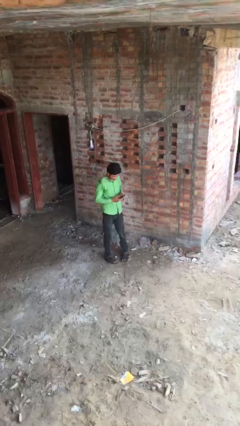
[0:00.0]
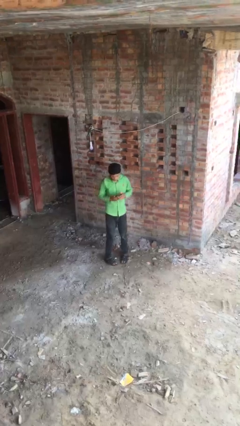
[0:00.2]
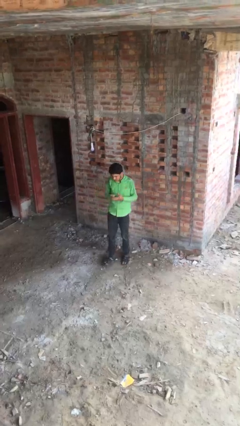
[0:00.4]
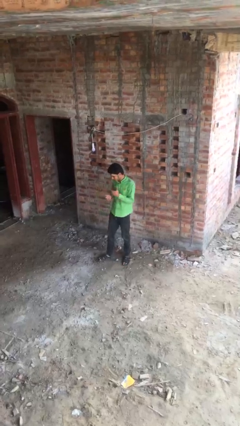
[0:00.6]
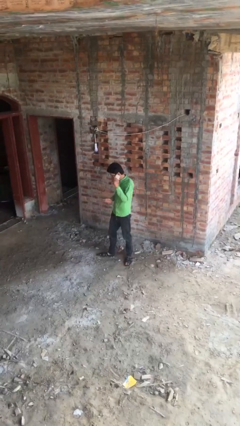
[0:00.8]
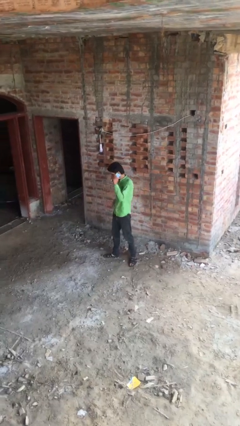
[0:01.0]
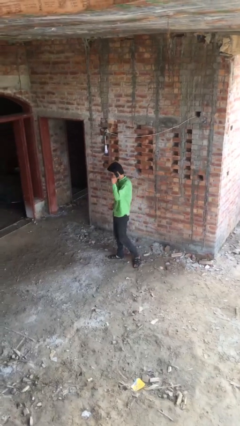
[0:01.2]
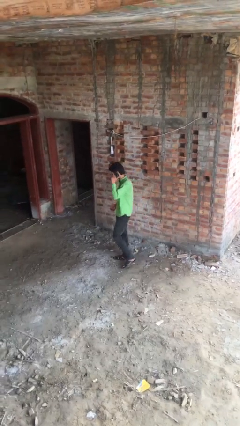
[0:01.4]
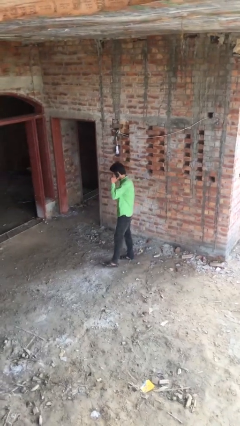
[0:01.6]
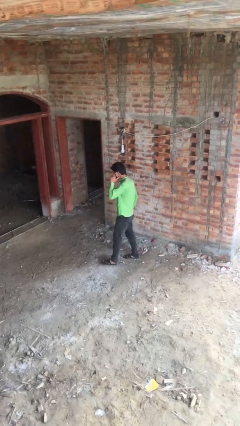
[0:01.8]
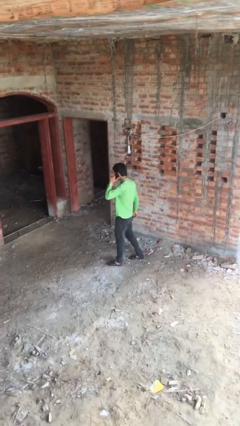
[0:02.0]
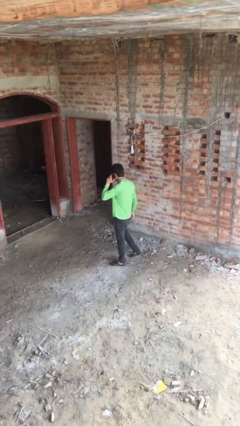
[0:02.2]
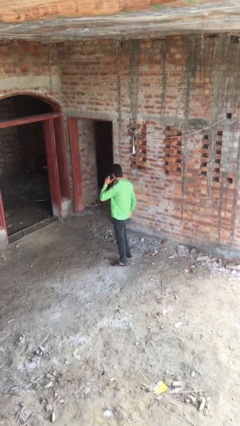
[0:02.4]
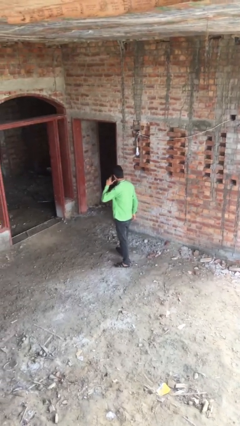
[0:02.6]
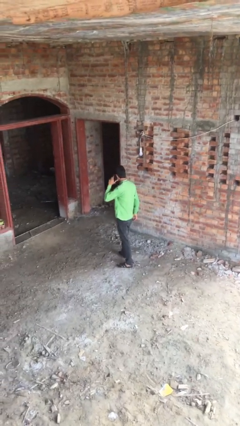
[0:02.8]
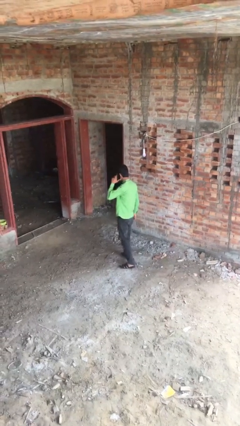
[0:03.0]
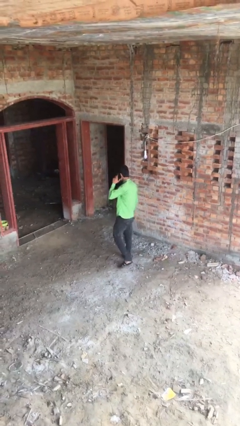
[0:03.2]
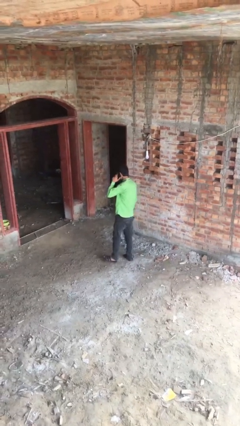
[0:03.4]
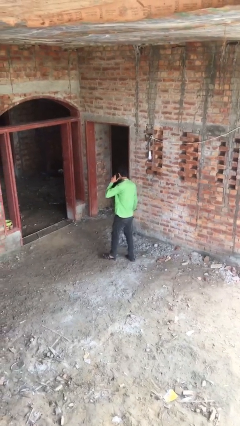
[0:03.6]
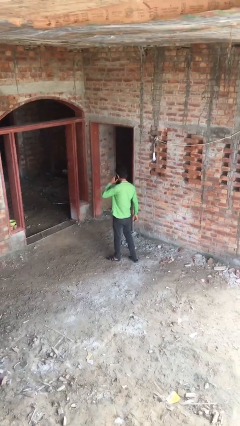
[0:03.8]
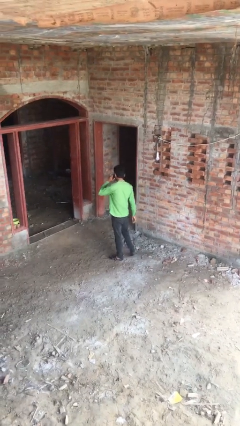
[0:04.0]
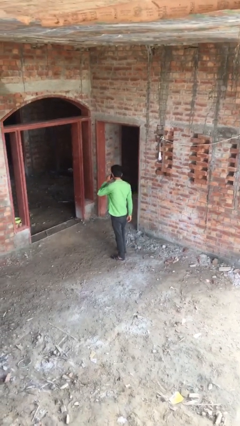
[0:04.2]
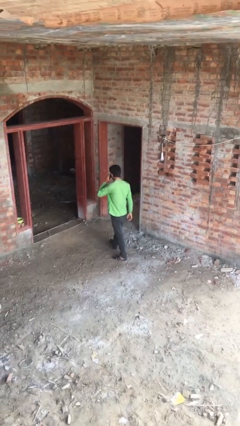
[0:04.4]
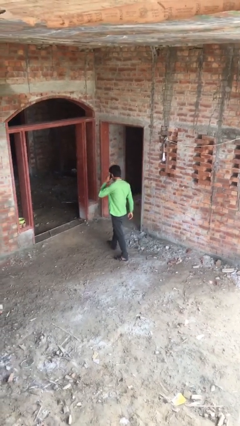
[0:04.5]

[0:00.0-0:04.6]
person talks on phone

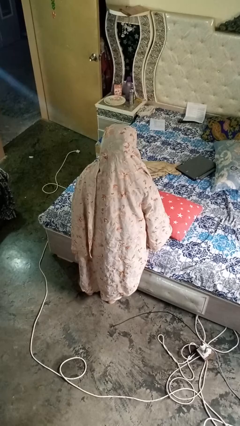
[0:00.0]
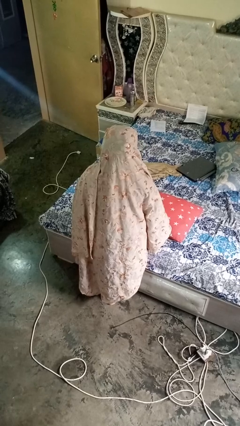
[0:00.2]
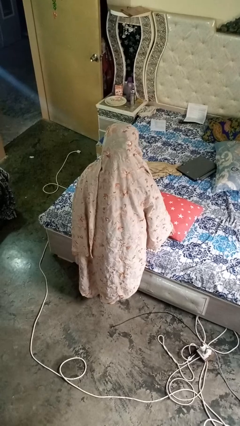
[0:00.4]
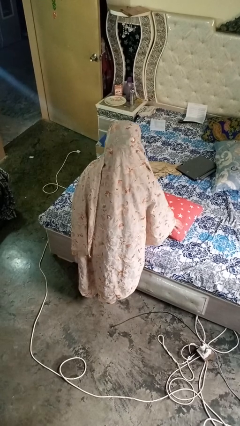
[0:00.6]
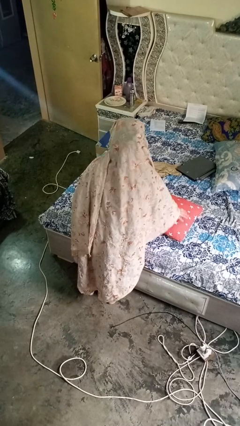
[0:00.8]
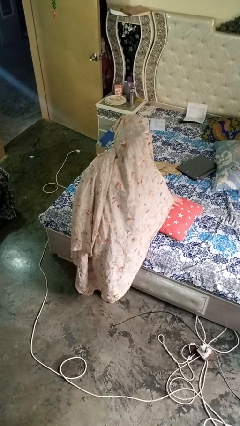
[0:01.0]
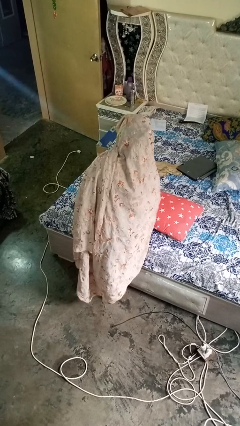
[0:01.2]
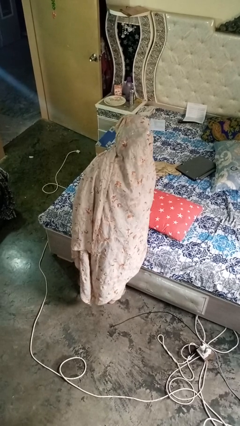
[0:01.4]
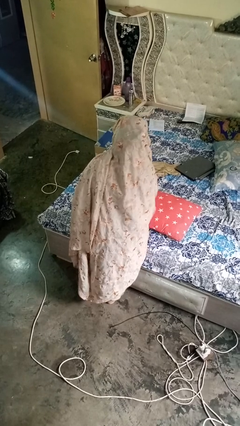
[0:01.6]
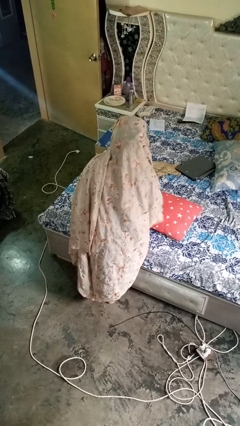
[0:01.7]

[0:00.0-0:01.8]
person waves hand over object

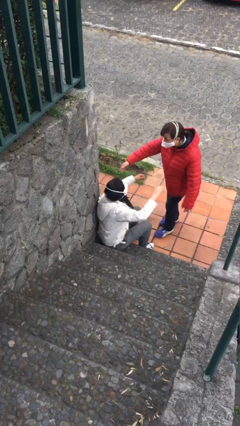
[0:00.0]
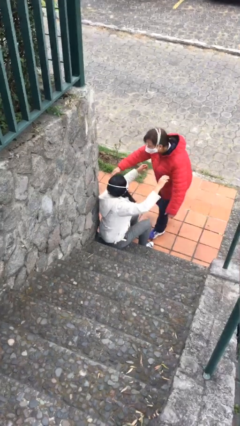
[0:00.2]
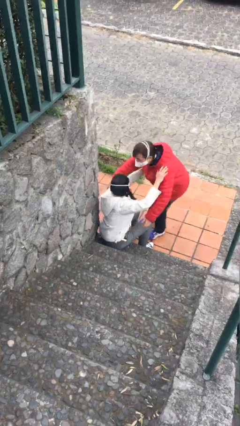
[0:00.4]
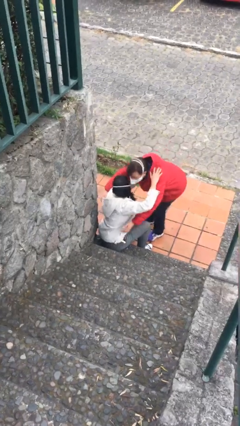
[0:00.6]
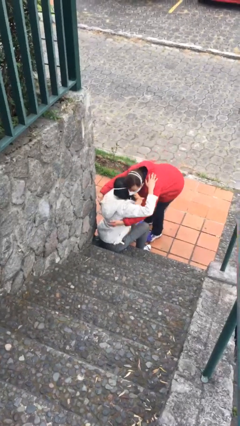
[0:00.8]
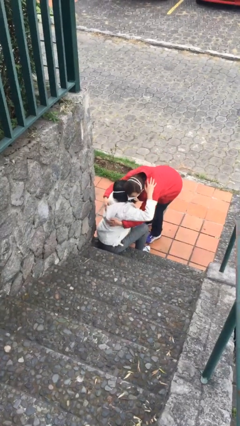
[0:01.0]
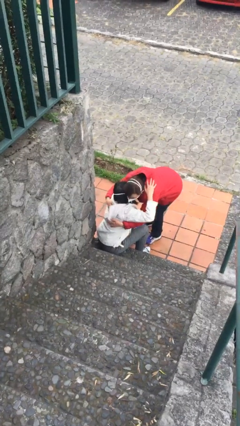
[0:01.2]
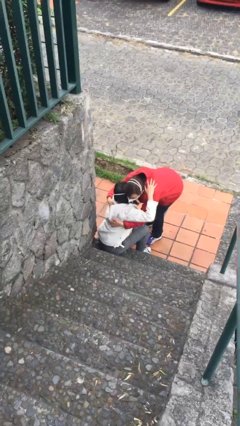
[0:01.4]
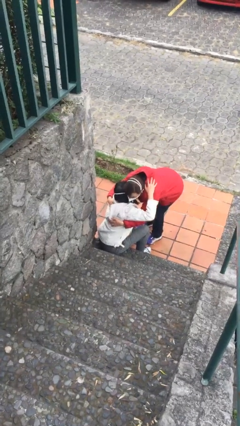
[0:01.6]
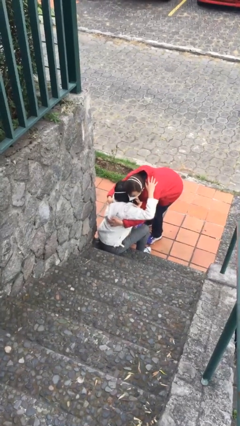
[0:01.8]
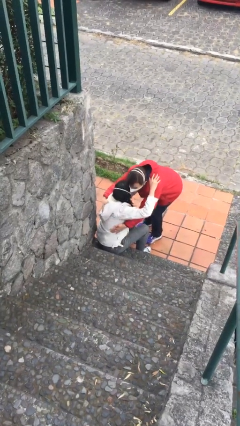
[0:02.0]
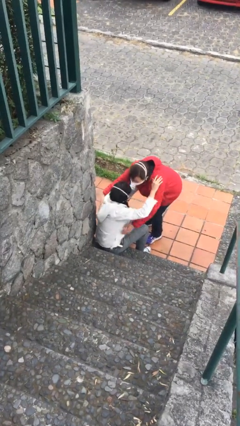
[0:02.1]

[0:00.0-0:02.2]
person embraces person

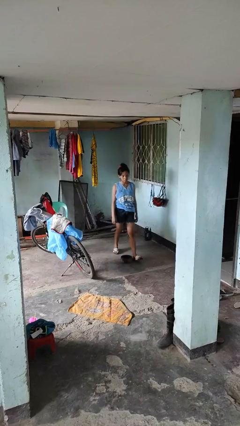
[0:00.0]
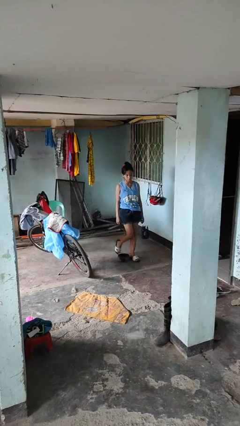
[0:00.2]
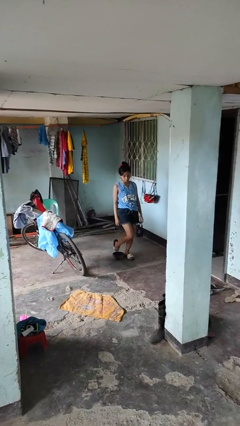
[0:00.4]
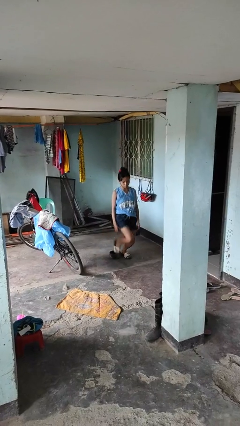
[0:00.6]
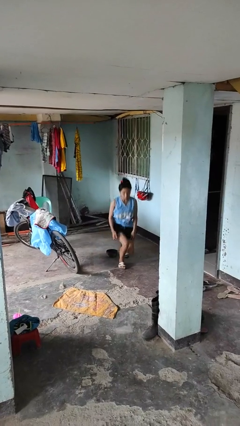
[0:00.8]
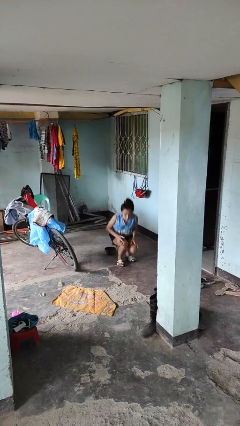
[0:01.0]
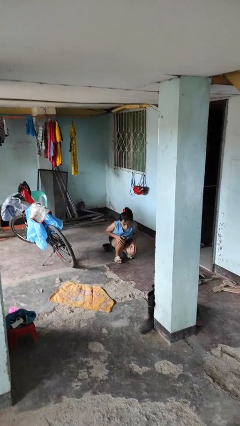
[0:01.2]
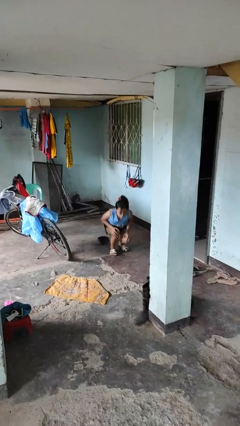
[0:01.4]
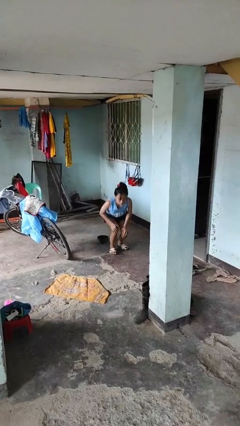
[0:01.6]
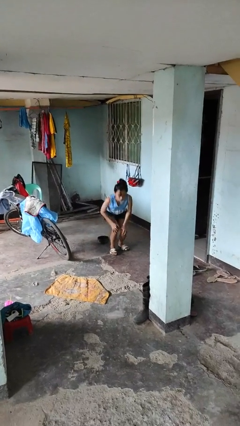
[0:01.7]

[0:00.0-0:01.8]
person trips on object on floor

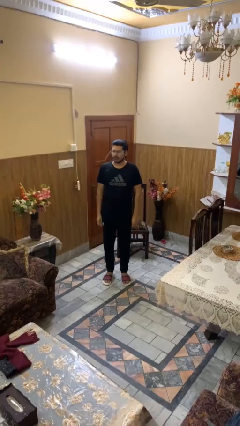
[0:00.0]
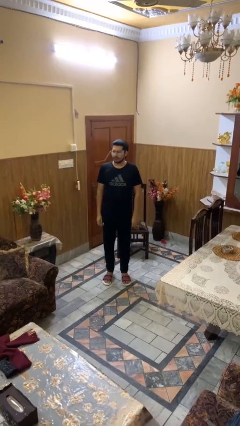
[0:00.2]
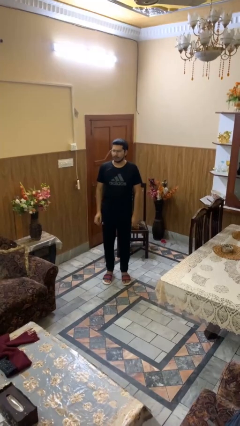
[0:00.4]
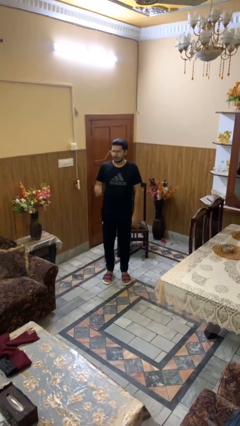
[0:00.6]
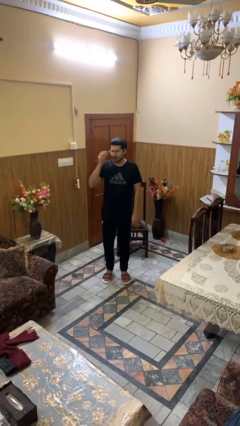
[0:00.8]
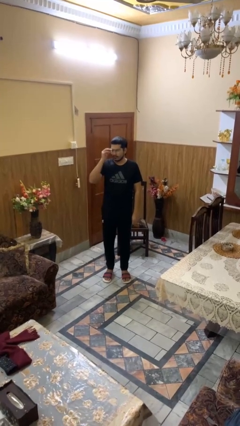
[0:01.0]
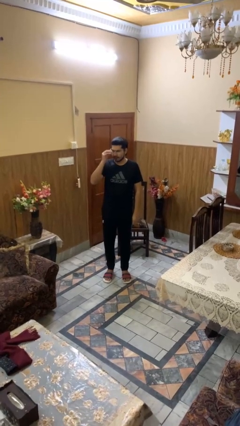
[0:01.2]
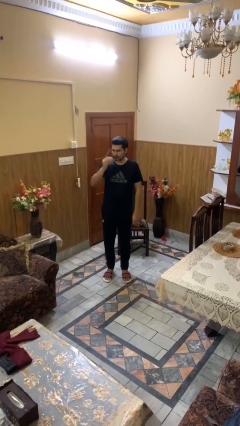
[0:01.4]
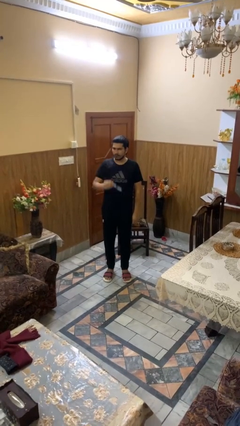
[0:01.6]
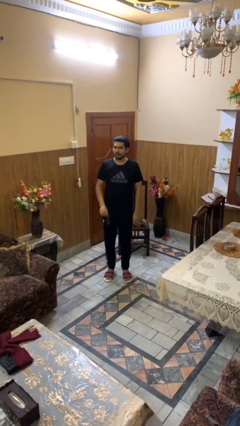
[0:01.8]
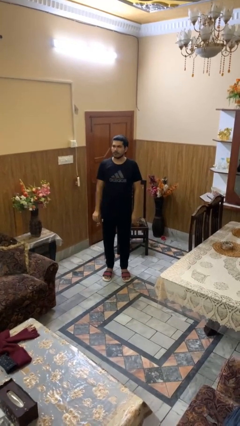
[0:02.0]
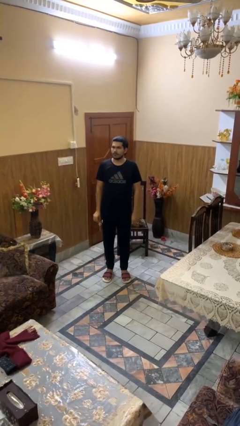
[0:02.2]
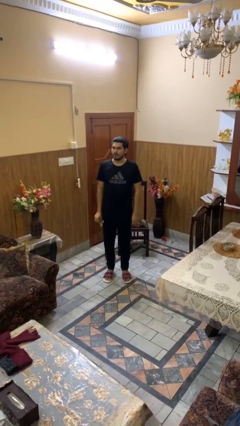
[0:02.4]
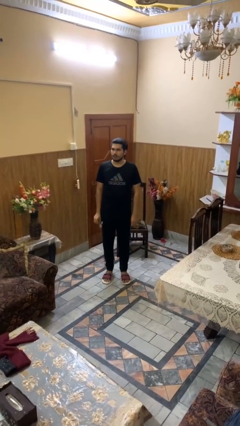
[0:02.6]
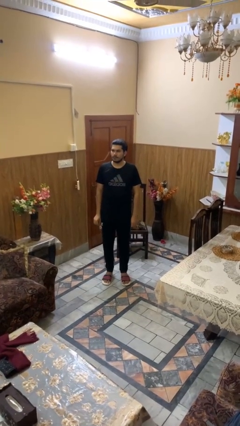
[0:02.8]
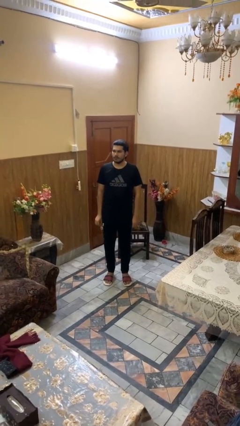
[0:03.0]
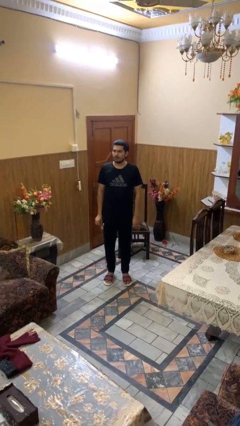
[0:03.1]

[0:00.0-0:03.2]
person takes off glasses

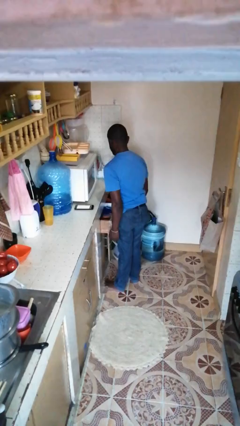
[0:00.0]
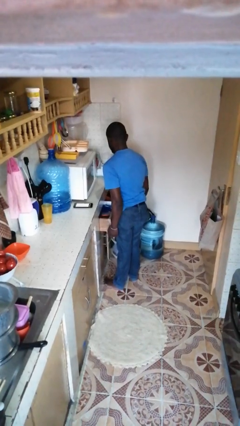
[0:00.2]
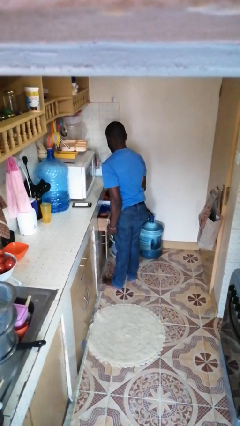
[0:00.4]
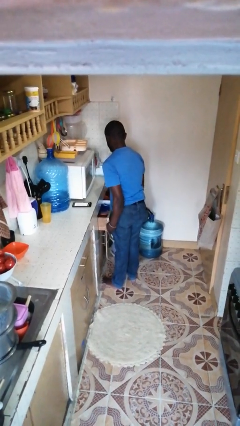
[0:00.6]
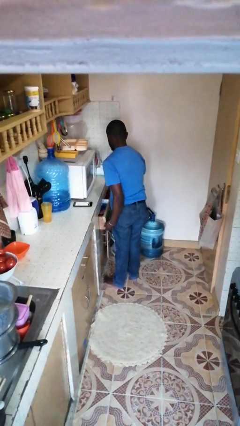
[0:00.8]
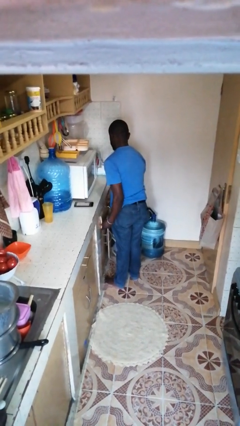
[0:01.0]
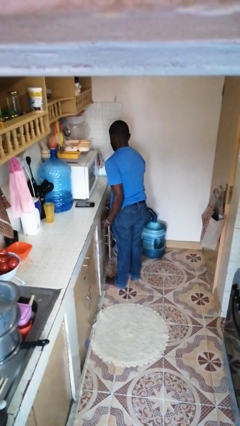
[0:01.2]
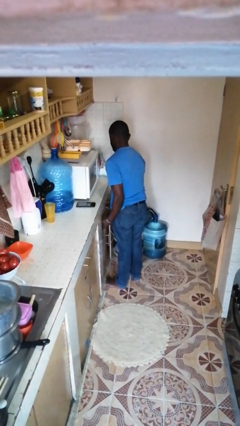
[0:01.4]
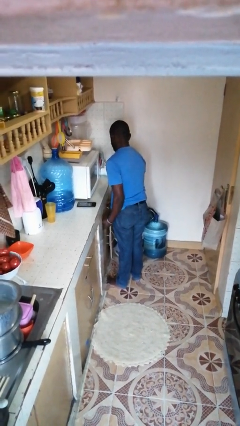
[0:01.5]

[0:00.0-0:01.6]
person closes kitchen drawer

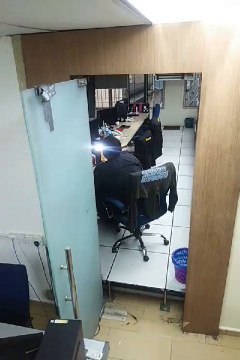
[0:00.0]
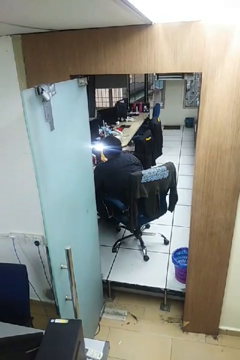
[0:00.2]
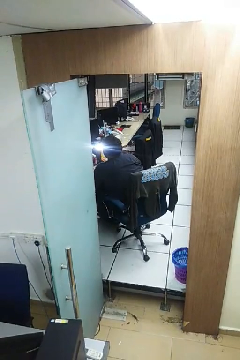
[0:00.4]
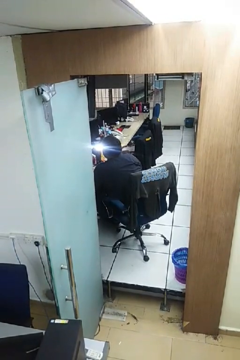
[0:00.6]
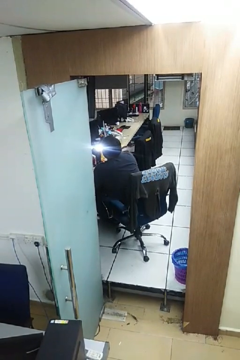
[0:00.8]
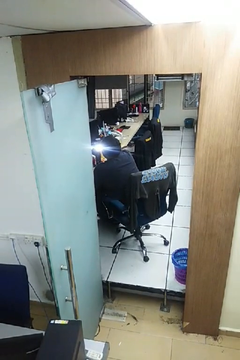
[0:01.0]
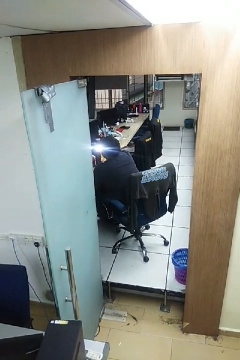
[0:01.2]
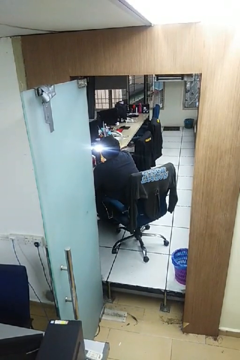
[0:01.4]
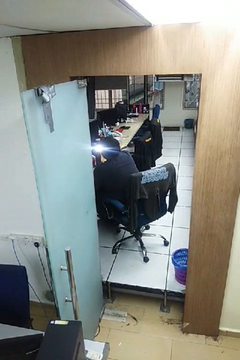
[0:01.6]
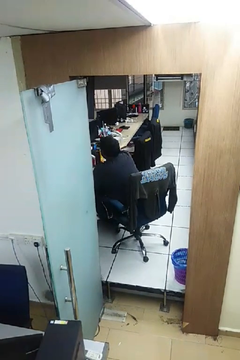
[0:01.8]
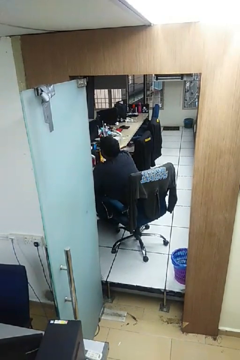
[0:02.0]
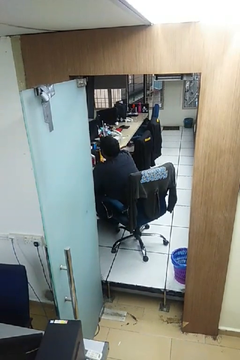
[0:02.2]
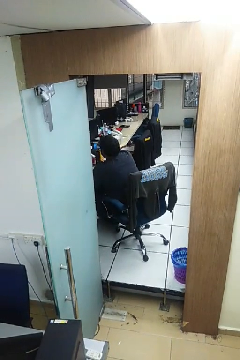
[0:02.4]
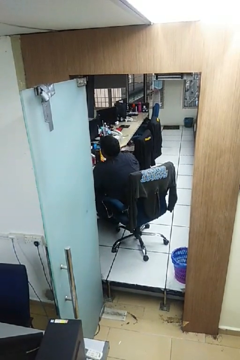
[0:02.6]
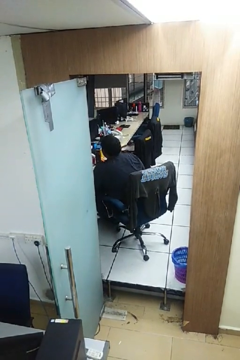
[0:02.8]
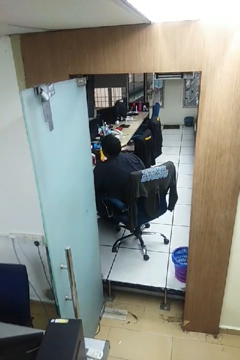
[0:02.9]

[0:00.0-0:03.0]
person turns off lamp
